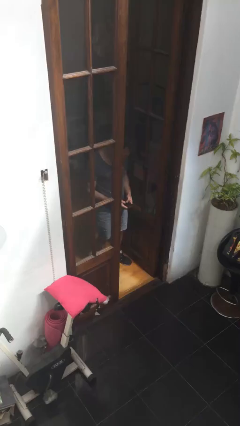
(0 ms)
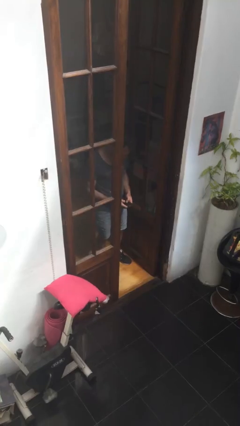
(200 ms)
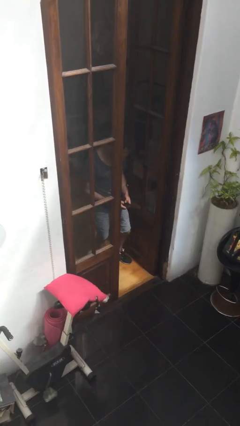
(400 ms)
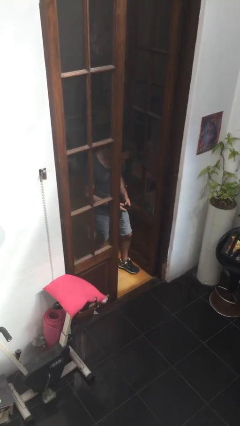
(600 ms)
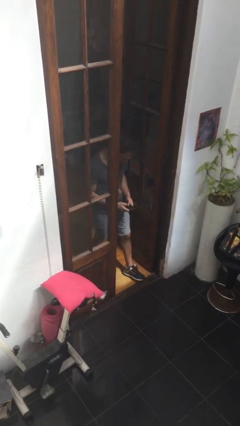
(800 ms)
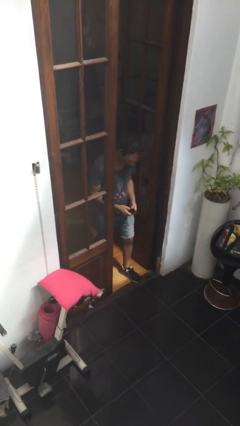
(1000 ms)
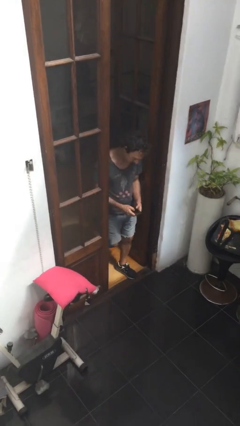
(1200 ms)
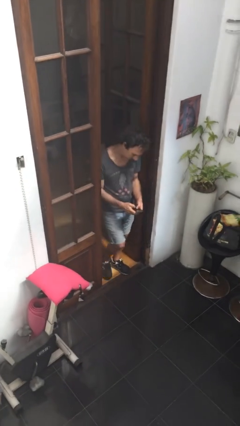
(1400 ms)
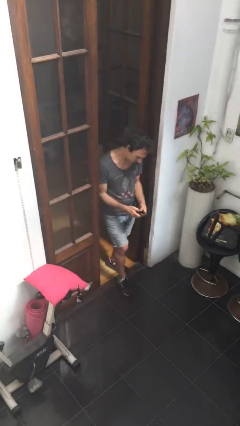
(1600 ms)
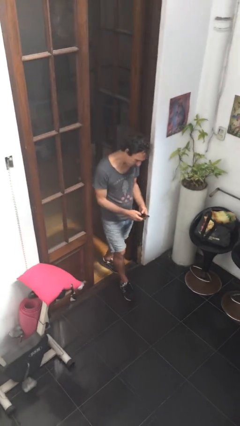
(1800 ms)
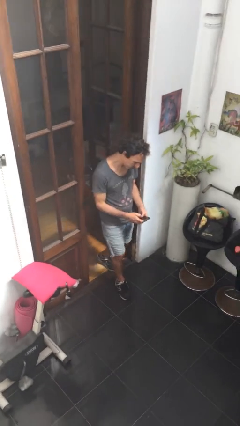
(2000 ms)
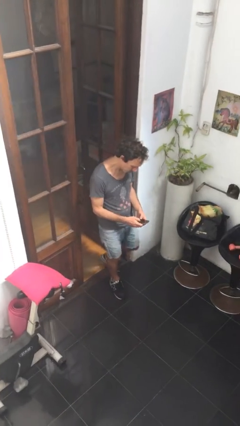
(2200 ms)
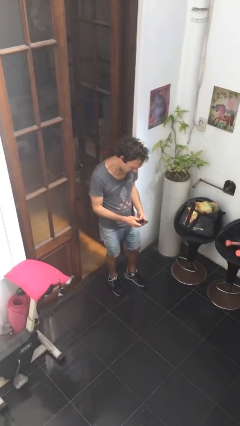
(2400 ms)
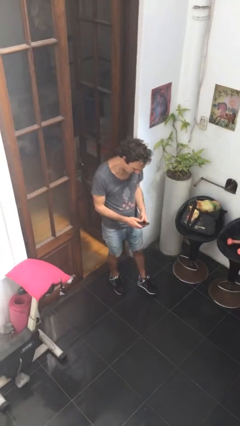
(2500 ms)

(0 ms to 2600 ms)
person enters scene through structure

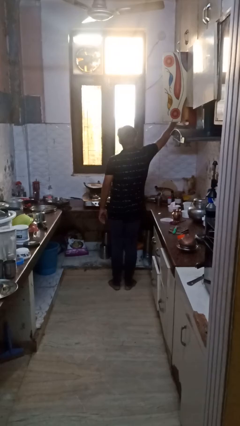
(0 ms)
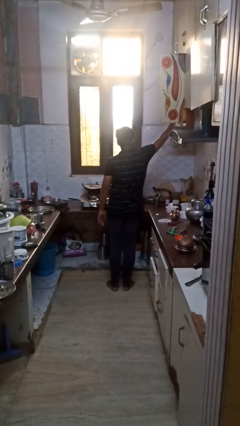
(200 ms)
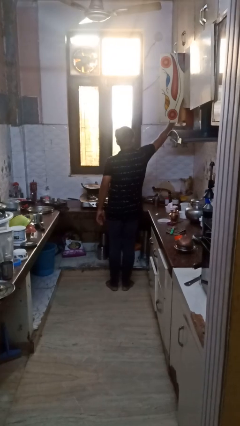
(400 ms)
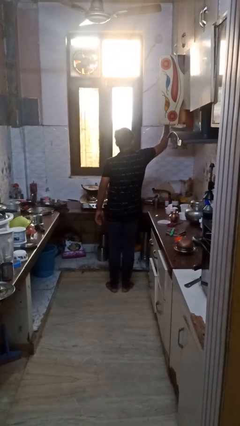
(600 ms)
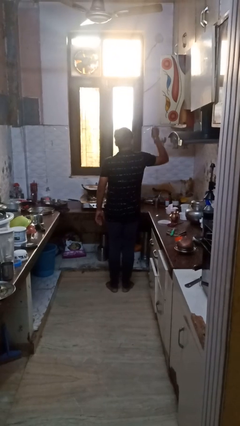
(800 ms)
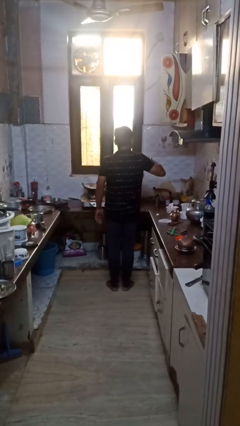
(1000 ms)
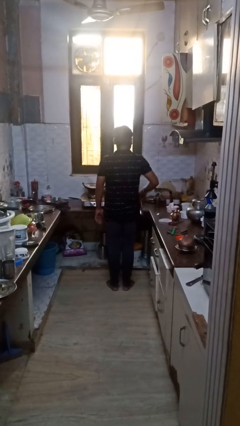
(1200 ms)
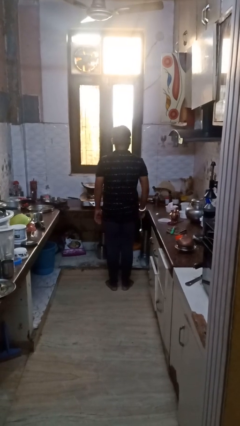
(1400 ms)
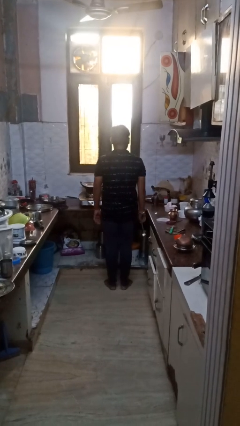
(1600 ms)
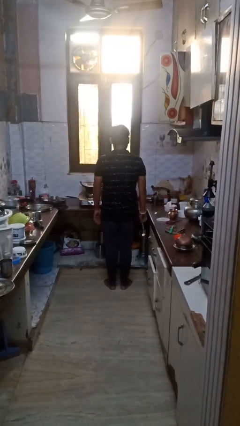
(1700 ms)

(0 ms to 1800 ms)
person puts object in cabinet

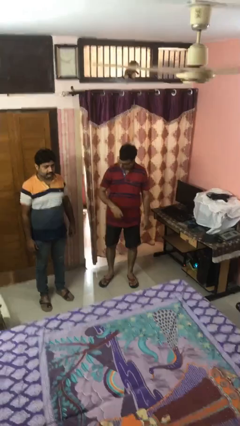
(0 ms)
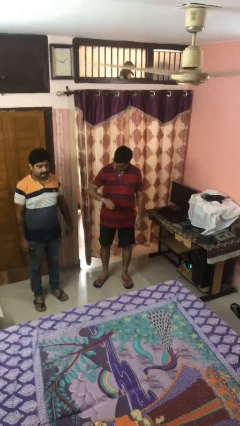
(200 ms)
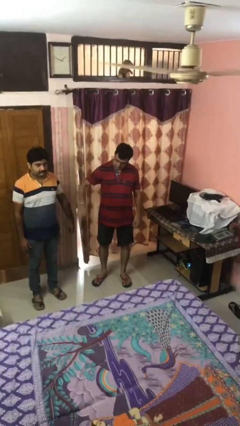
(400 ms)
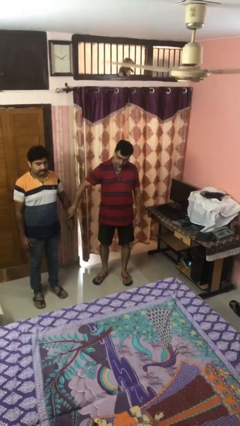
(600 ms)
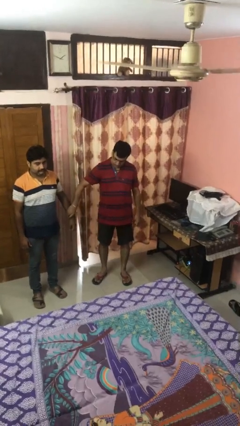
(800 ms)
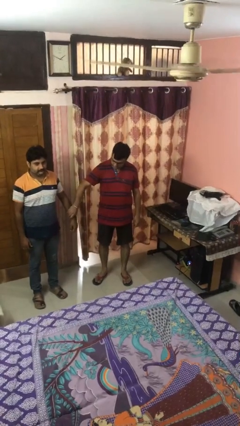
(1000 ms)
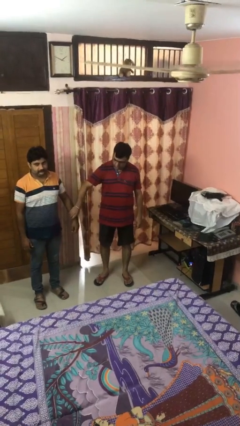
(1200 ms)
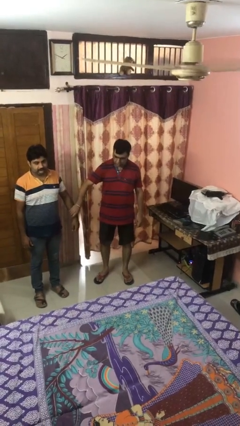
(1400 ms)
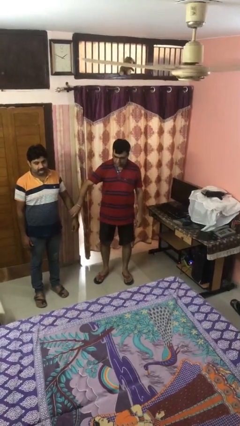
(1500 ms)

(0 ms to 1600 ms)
person grabs person by forearm

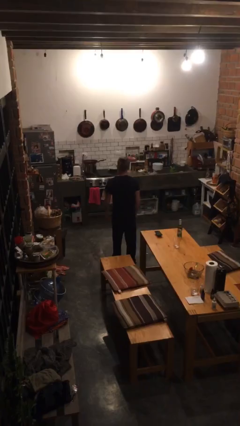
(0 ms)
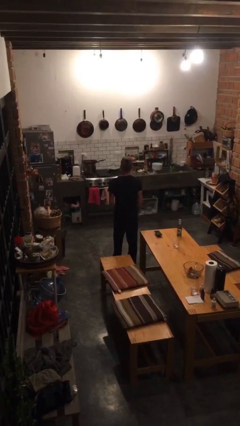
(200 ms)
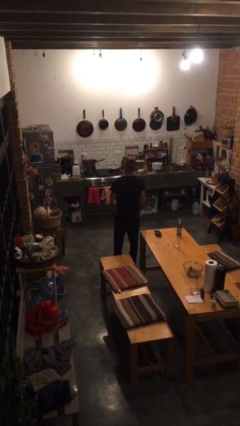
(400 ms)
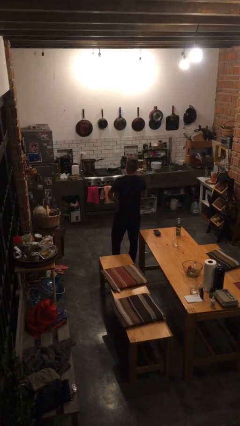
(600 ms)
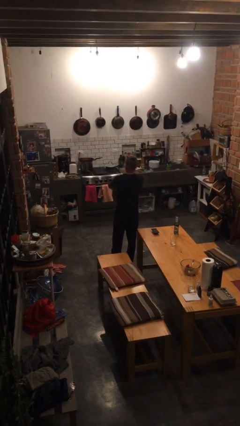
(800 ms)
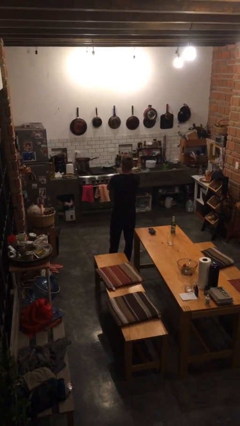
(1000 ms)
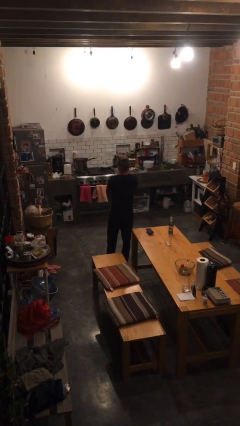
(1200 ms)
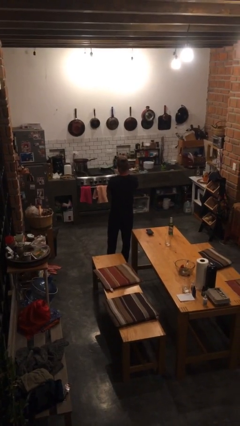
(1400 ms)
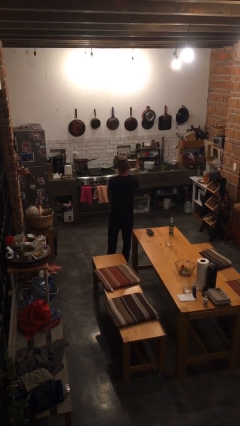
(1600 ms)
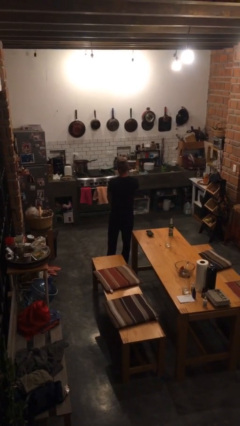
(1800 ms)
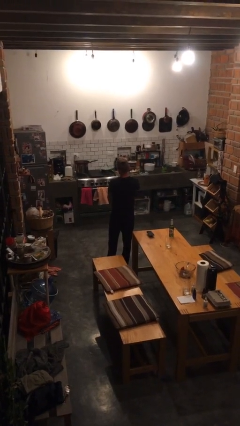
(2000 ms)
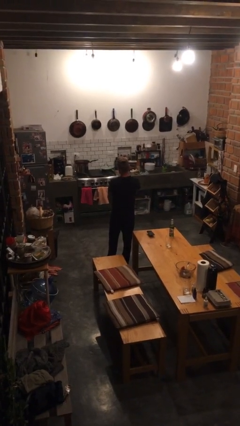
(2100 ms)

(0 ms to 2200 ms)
person gestures arms x

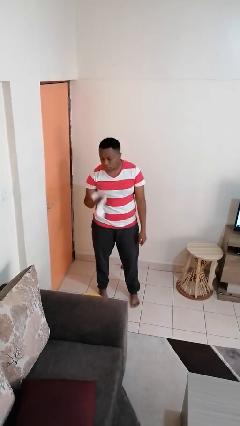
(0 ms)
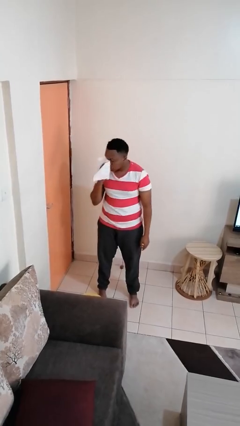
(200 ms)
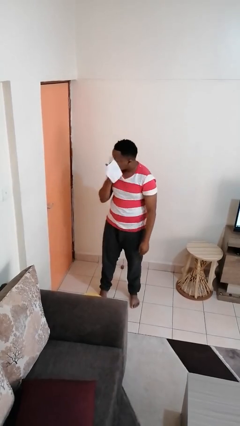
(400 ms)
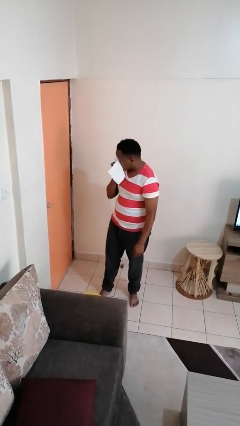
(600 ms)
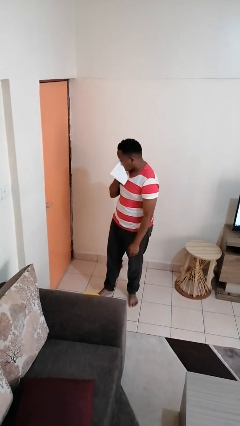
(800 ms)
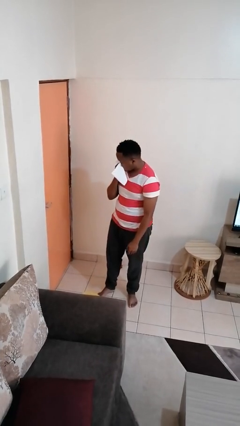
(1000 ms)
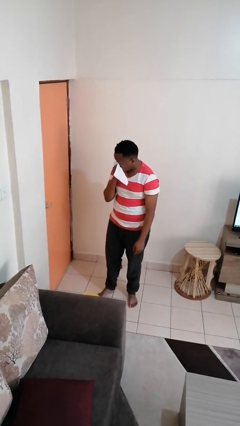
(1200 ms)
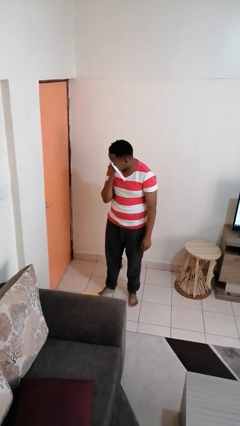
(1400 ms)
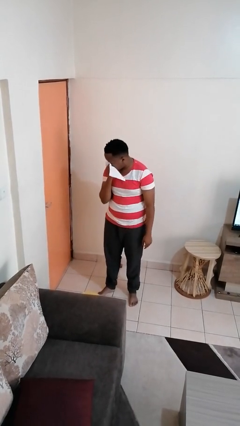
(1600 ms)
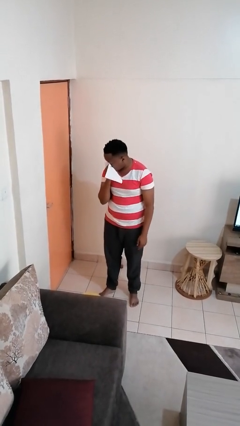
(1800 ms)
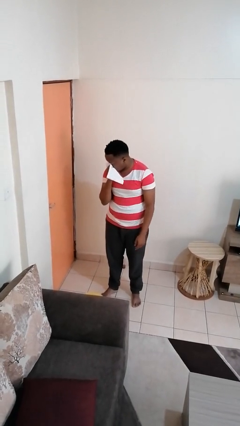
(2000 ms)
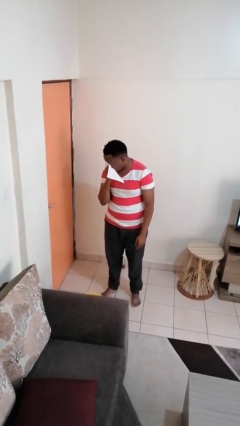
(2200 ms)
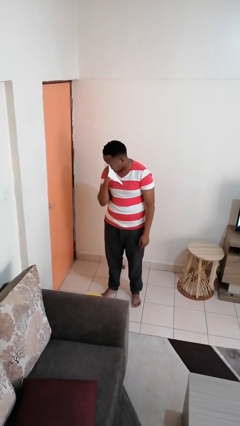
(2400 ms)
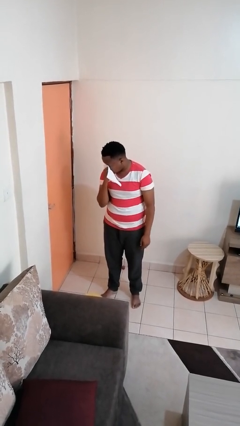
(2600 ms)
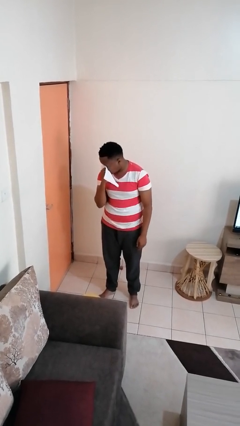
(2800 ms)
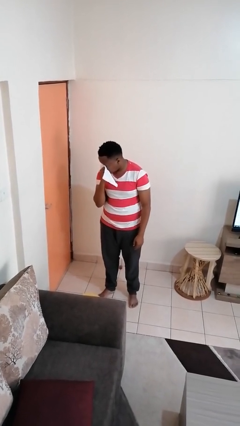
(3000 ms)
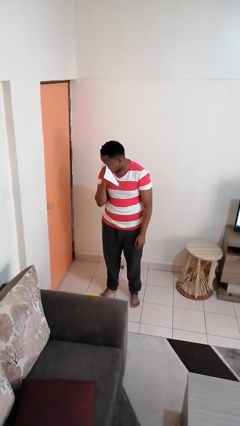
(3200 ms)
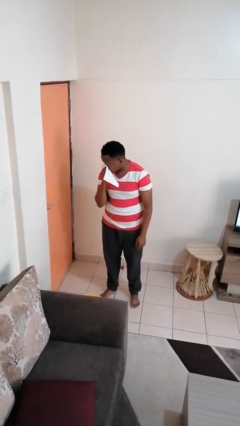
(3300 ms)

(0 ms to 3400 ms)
person blows nose

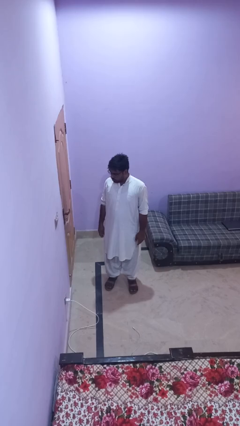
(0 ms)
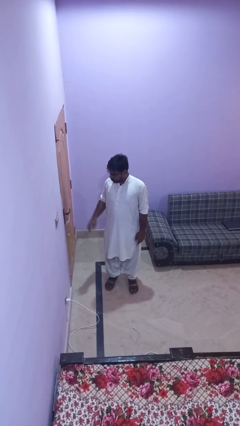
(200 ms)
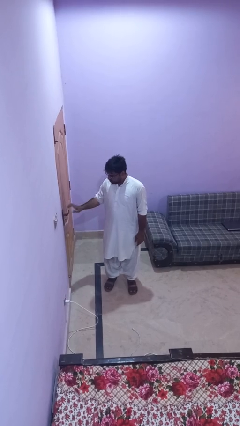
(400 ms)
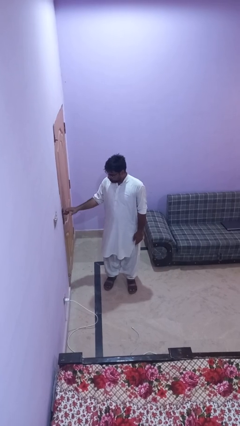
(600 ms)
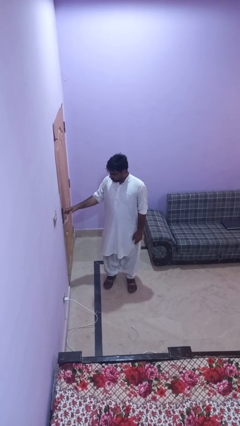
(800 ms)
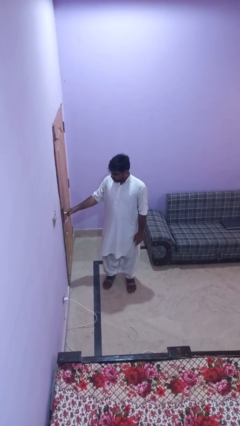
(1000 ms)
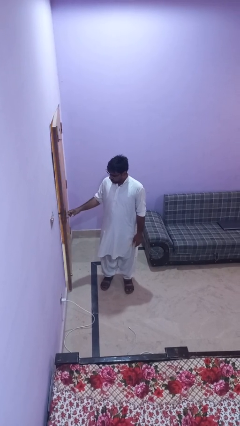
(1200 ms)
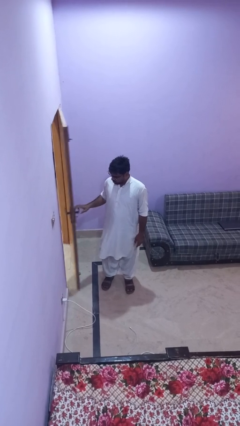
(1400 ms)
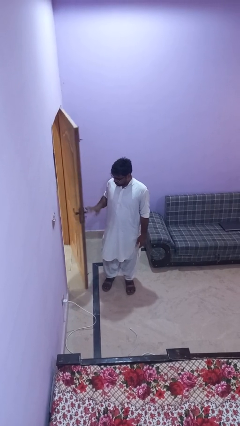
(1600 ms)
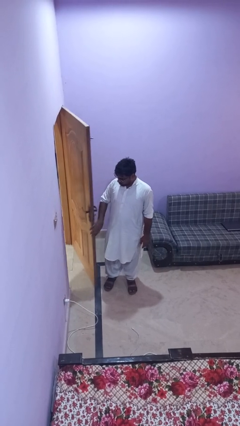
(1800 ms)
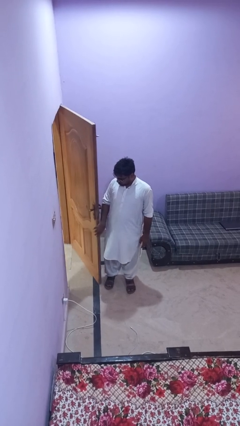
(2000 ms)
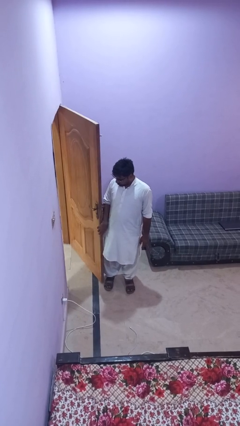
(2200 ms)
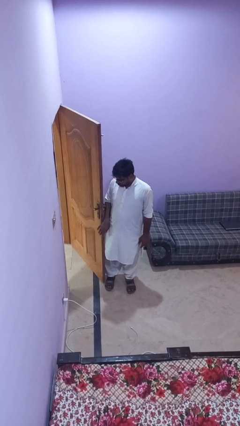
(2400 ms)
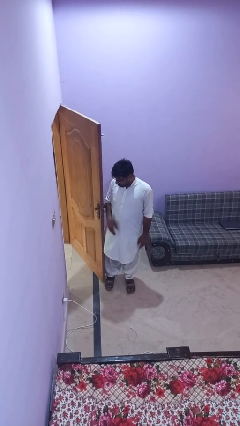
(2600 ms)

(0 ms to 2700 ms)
person opens facility door

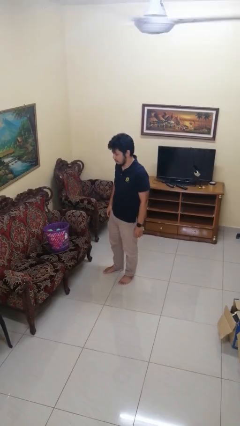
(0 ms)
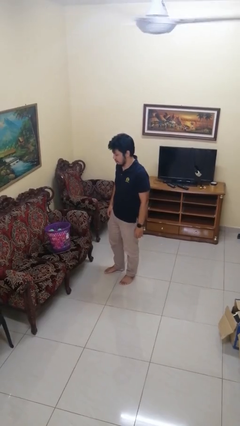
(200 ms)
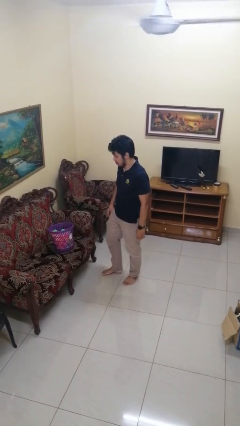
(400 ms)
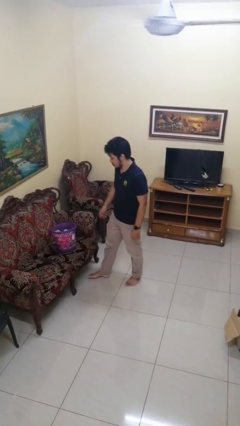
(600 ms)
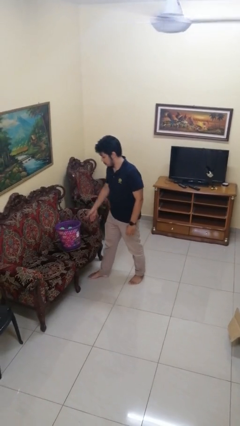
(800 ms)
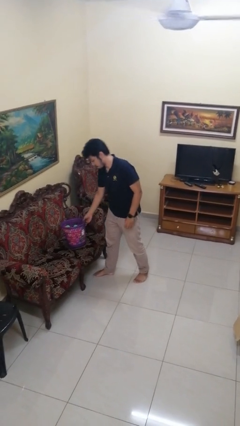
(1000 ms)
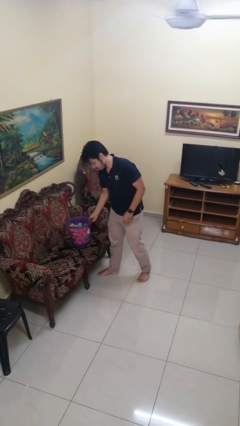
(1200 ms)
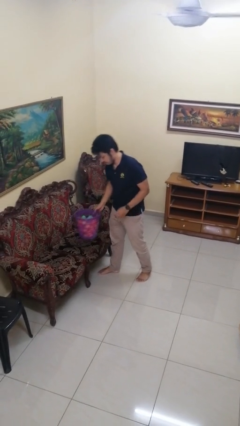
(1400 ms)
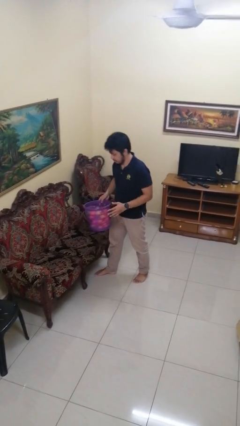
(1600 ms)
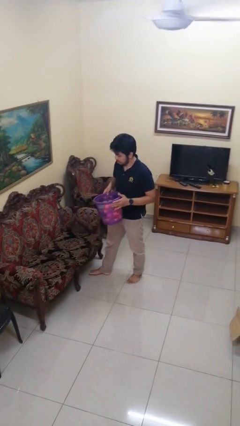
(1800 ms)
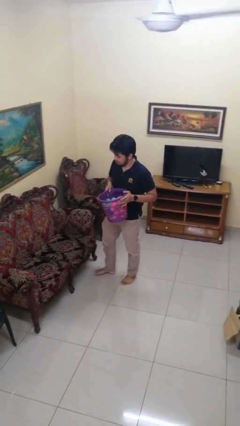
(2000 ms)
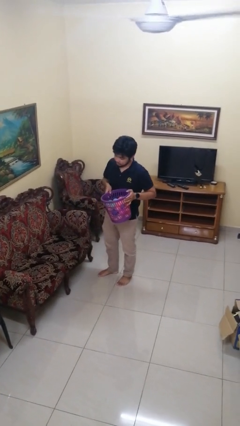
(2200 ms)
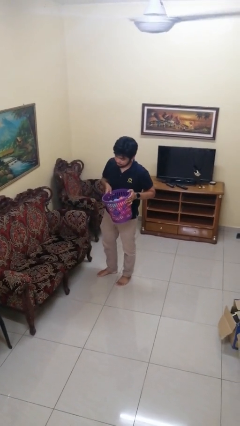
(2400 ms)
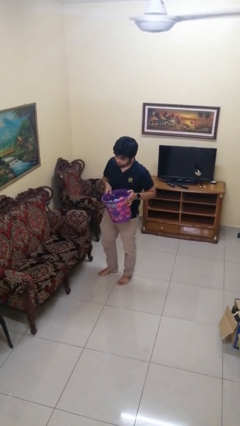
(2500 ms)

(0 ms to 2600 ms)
person picks up object from couch

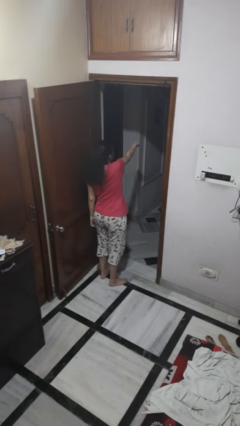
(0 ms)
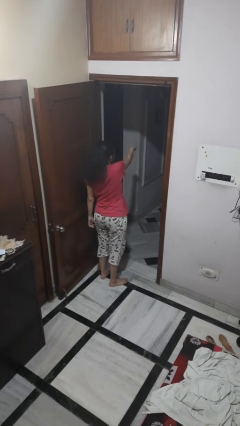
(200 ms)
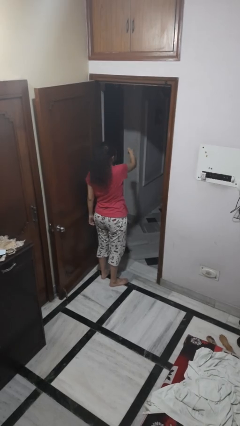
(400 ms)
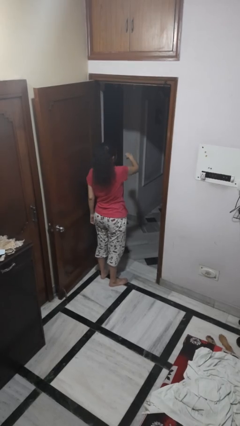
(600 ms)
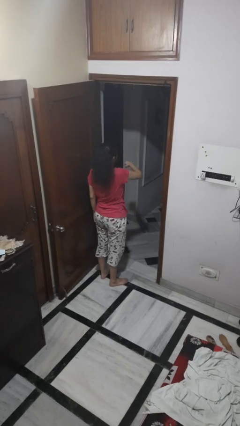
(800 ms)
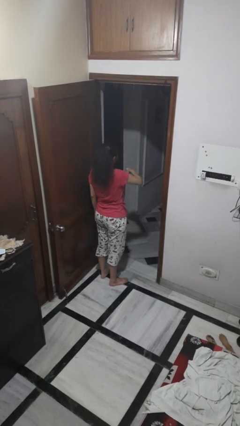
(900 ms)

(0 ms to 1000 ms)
person punches
